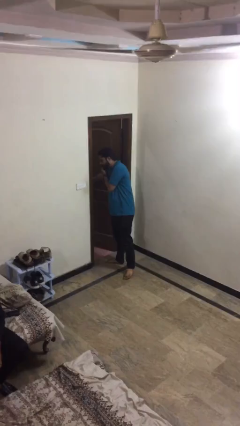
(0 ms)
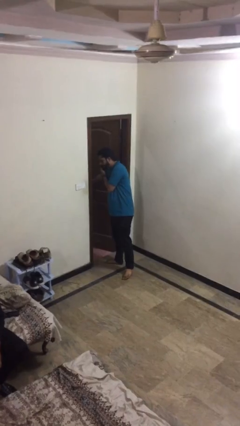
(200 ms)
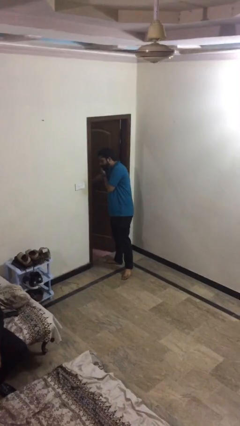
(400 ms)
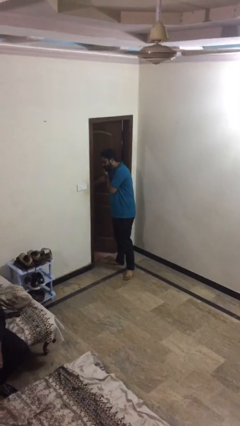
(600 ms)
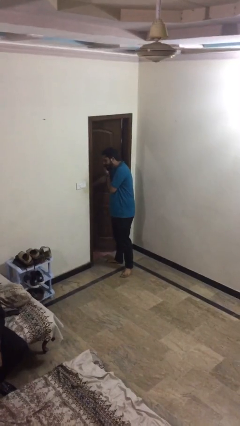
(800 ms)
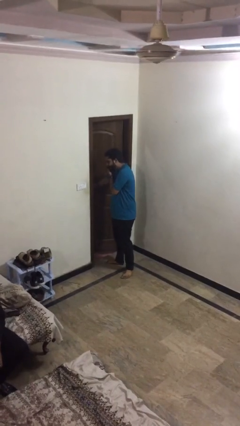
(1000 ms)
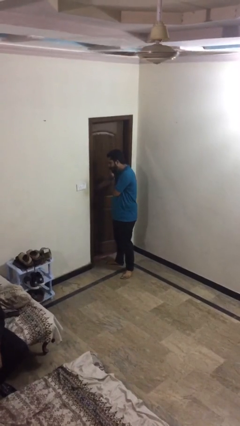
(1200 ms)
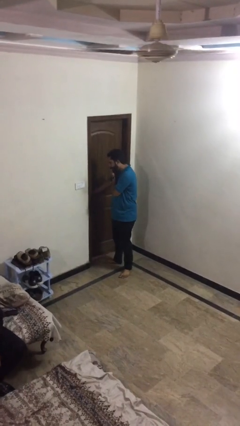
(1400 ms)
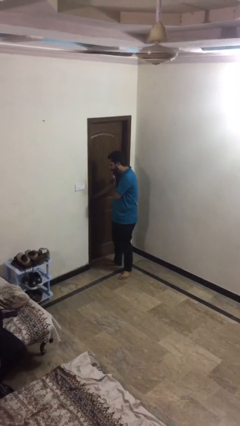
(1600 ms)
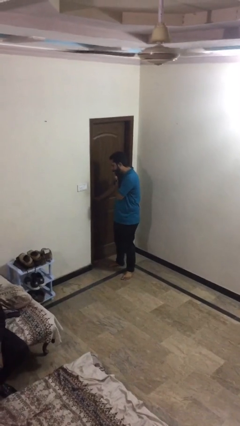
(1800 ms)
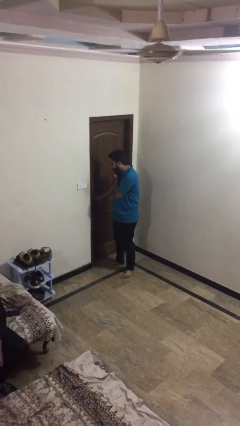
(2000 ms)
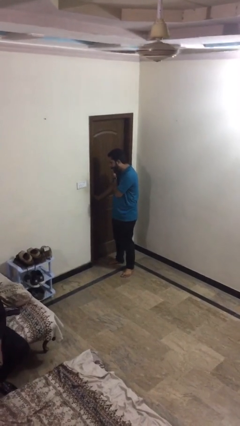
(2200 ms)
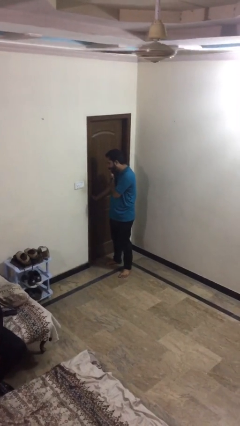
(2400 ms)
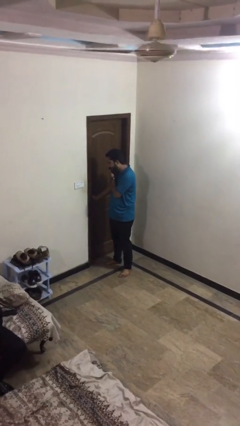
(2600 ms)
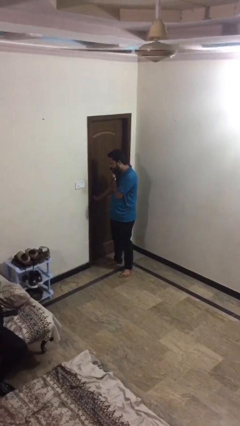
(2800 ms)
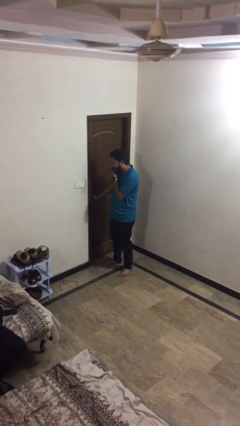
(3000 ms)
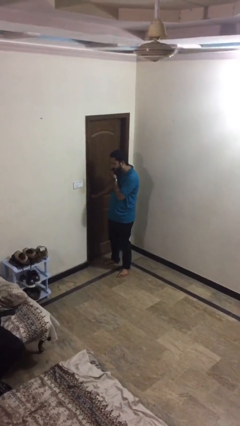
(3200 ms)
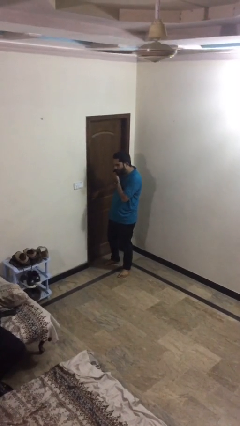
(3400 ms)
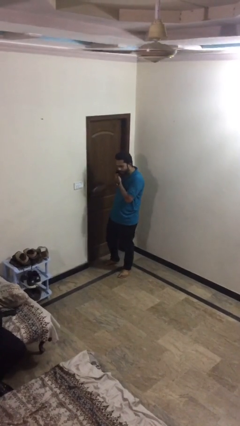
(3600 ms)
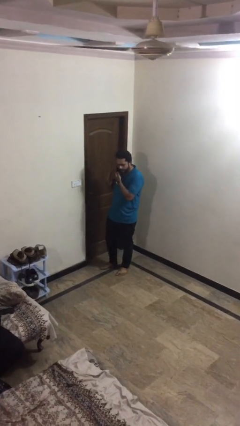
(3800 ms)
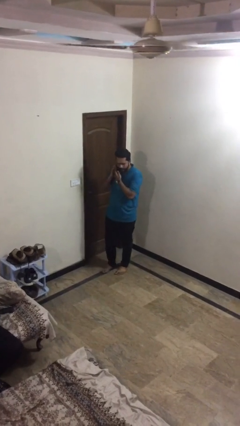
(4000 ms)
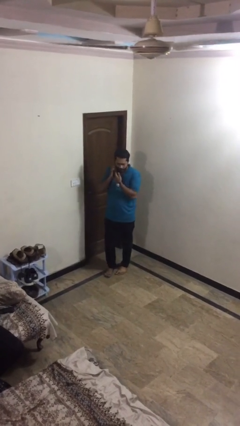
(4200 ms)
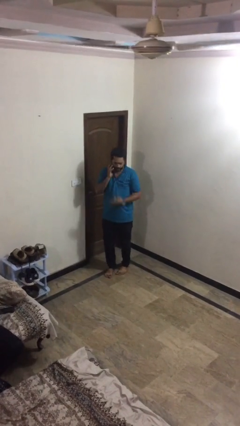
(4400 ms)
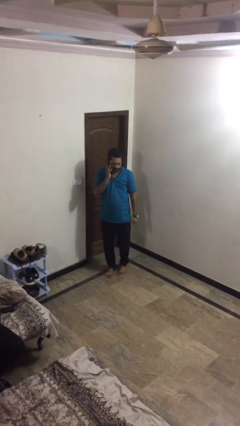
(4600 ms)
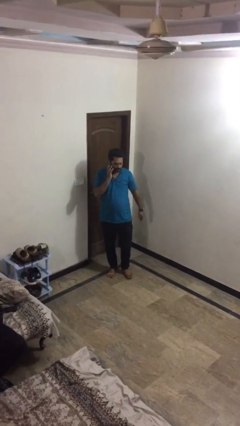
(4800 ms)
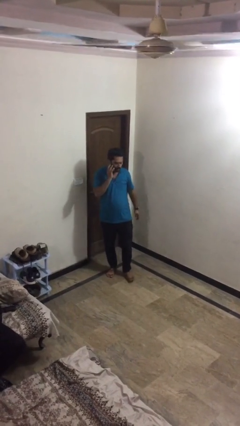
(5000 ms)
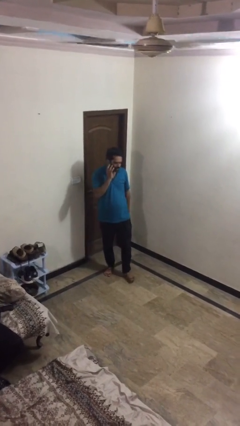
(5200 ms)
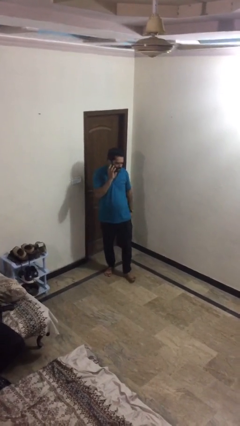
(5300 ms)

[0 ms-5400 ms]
person closes facility door

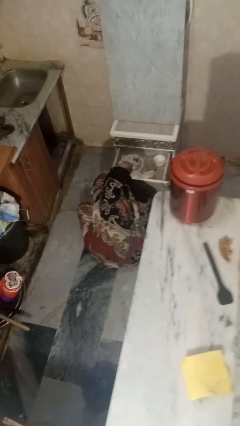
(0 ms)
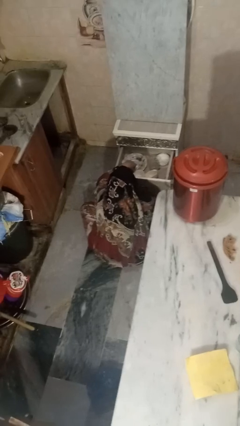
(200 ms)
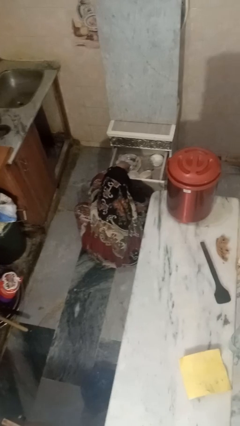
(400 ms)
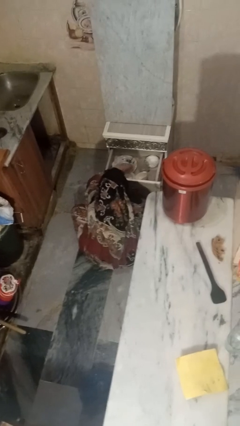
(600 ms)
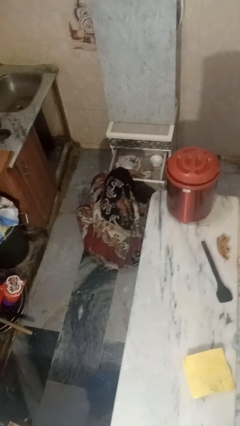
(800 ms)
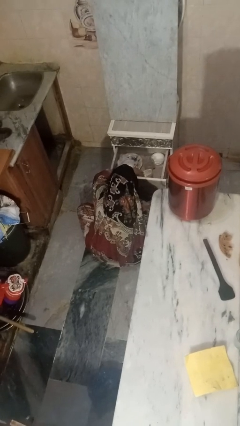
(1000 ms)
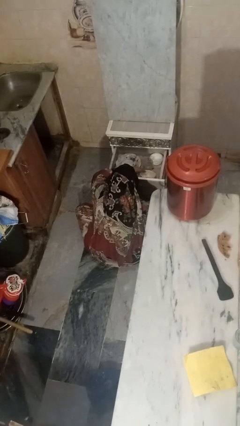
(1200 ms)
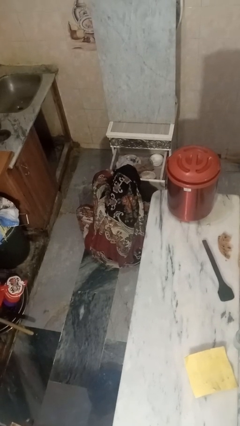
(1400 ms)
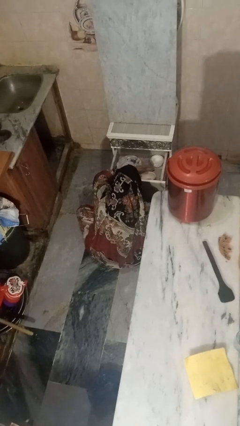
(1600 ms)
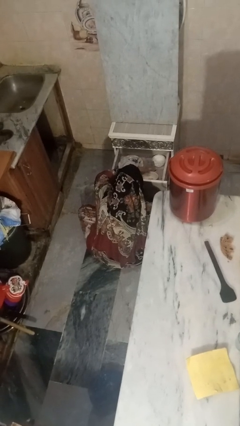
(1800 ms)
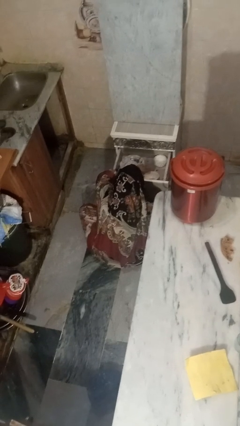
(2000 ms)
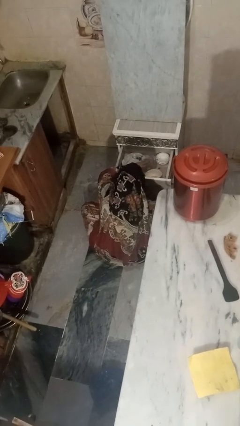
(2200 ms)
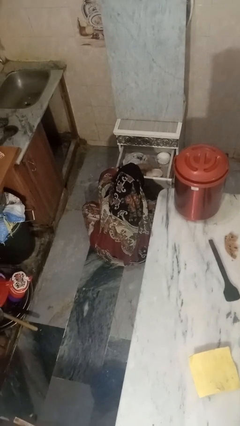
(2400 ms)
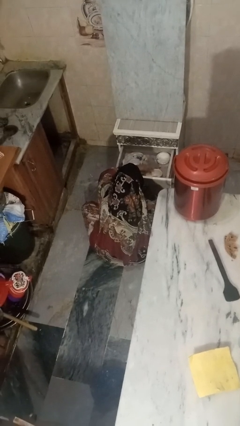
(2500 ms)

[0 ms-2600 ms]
person searches in kitchen drawer

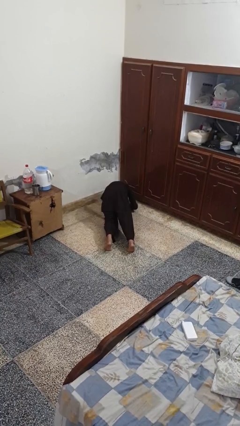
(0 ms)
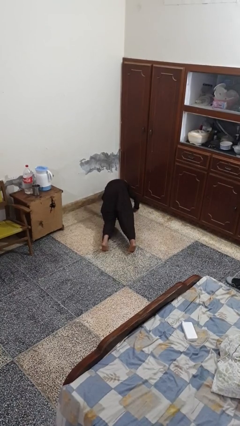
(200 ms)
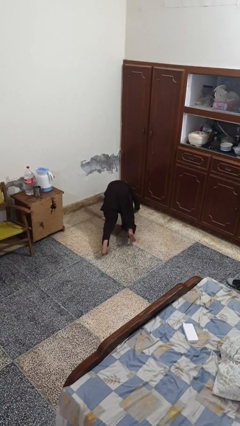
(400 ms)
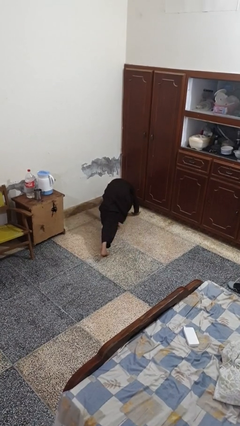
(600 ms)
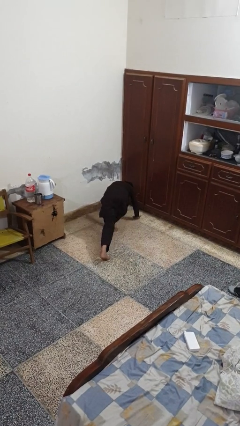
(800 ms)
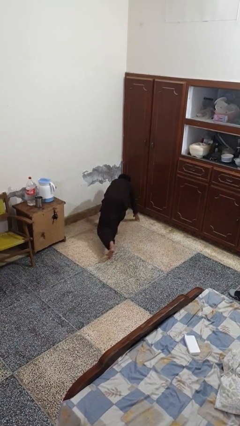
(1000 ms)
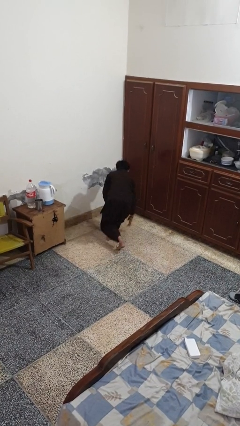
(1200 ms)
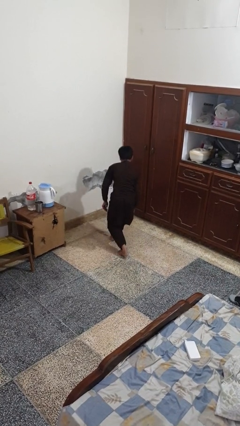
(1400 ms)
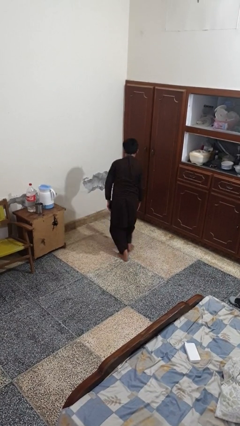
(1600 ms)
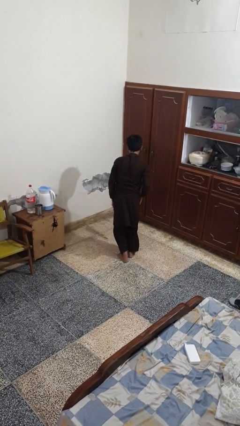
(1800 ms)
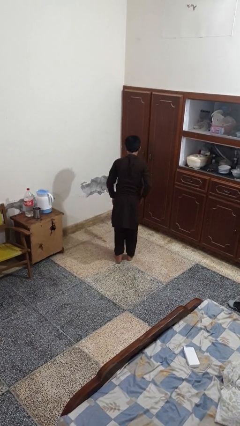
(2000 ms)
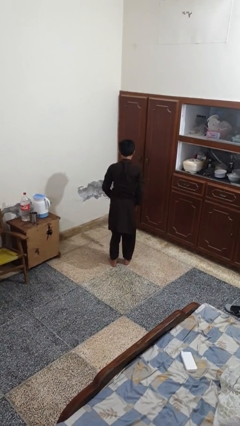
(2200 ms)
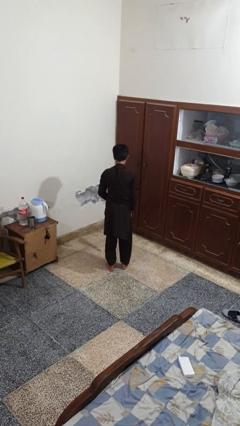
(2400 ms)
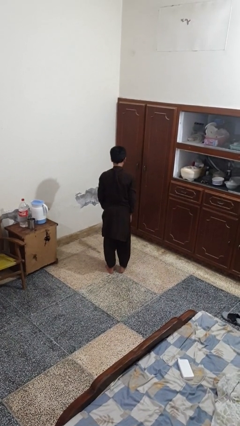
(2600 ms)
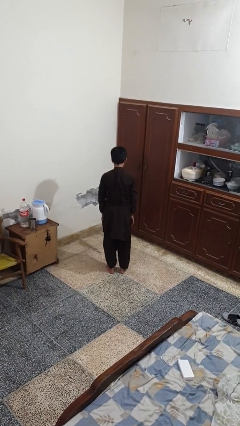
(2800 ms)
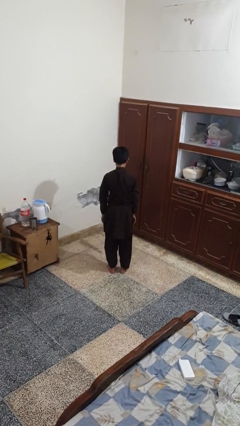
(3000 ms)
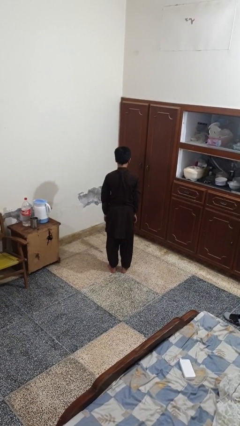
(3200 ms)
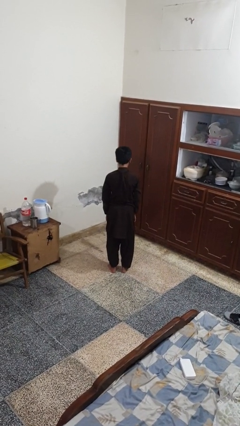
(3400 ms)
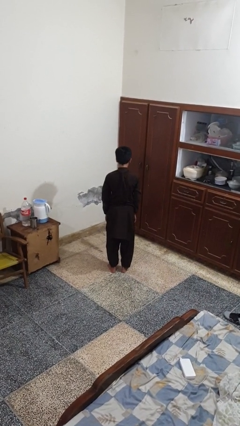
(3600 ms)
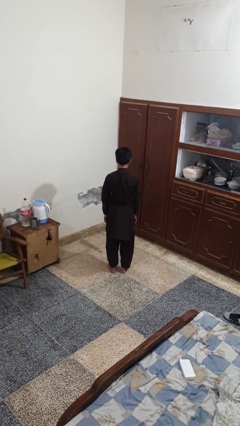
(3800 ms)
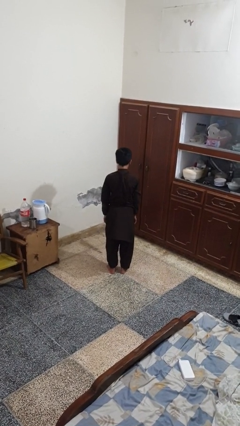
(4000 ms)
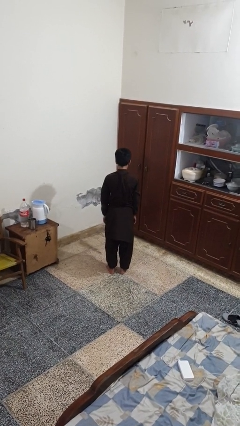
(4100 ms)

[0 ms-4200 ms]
person stands up from floor

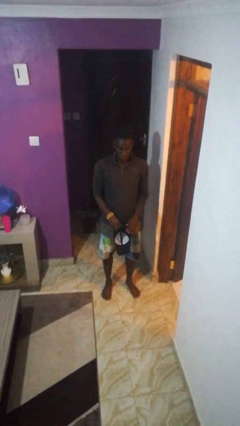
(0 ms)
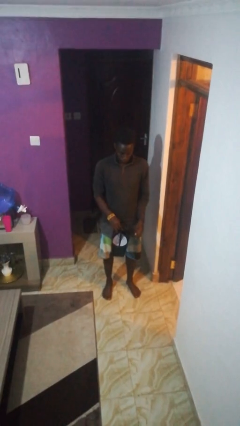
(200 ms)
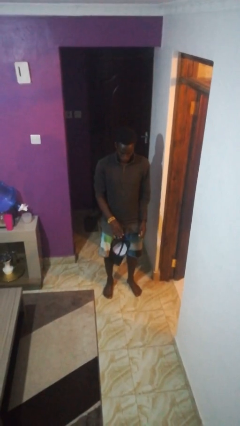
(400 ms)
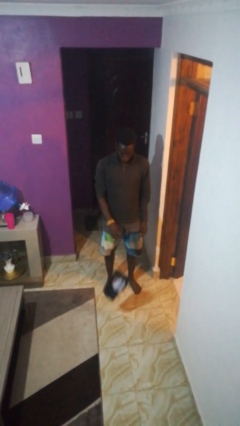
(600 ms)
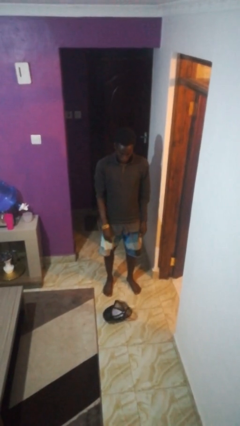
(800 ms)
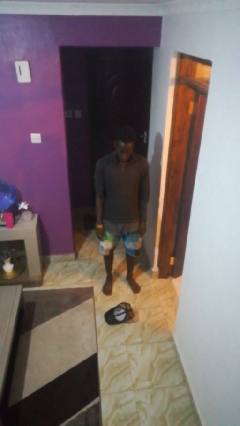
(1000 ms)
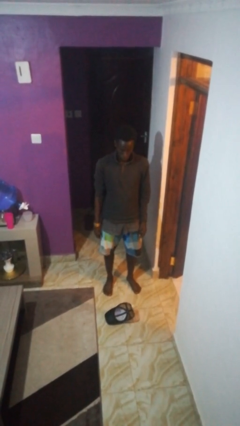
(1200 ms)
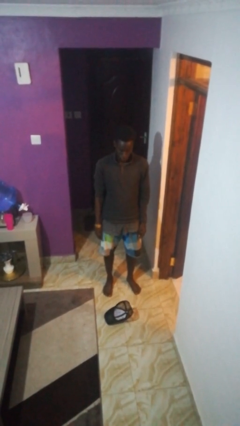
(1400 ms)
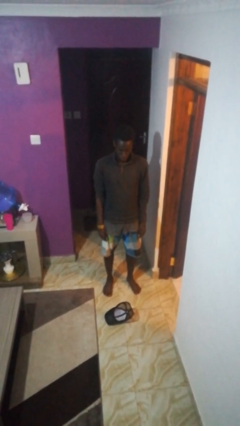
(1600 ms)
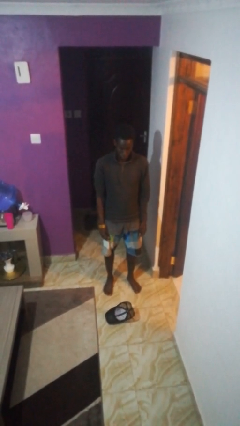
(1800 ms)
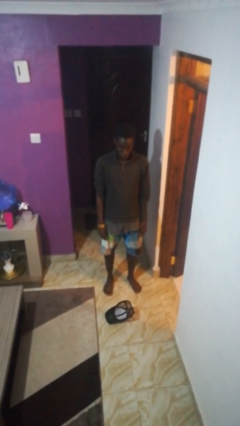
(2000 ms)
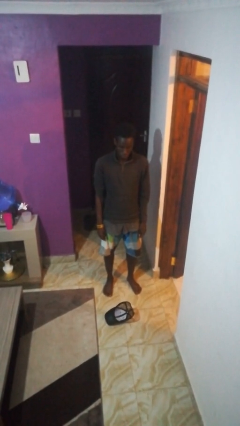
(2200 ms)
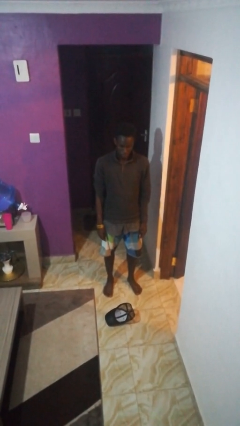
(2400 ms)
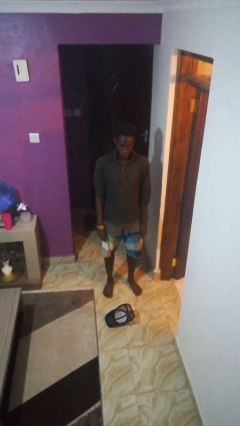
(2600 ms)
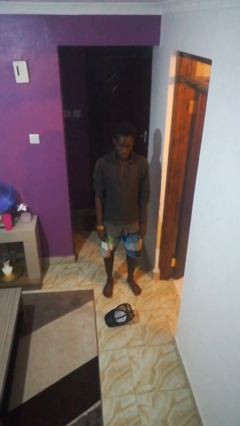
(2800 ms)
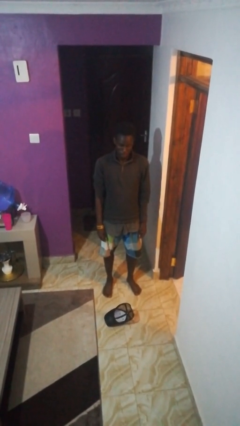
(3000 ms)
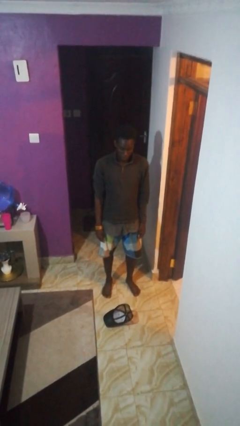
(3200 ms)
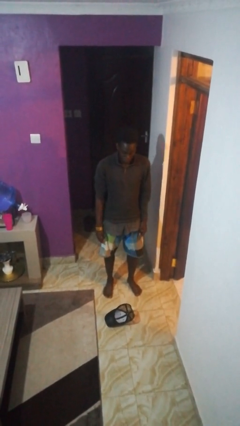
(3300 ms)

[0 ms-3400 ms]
person drops object

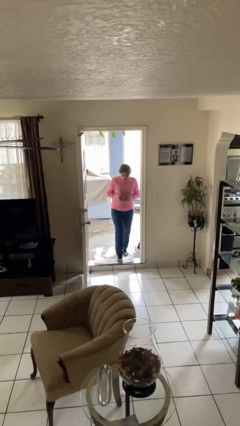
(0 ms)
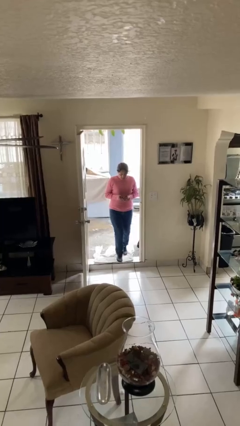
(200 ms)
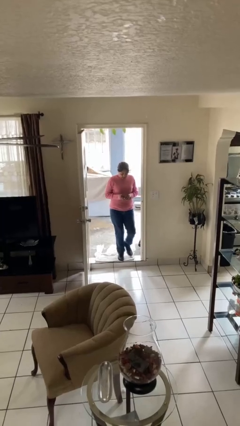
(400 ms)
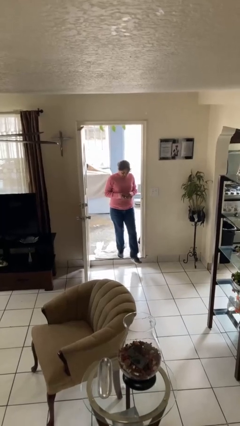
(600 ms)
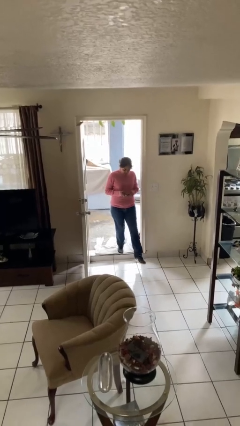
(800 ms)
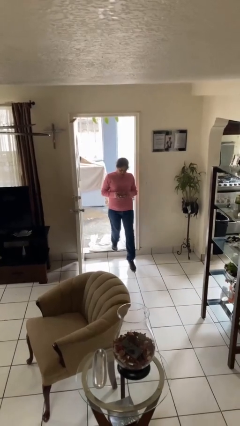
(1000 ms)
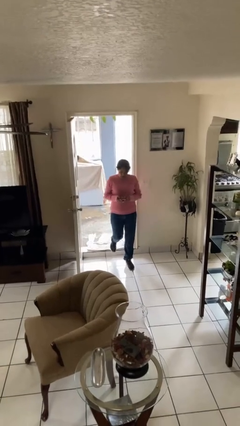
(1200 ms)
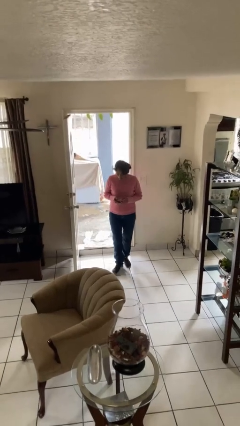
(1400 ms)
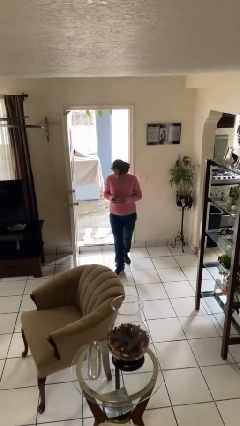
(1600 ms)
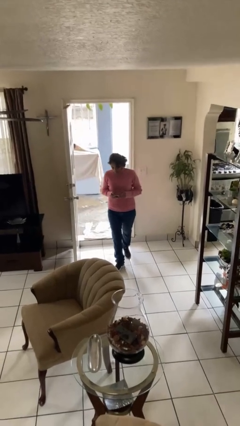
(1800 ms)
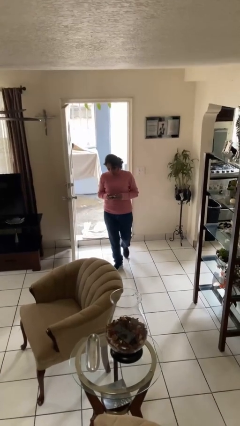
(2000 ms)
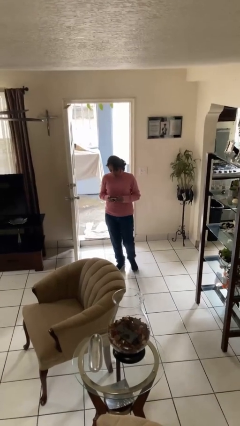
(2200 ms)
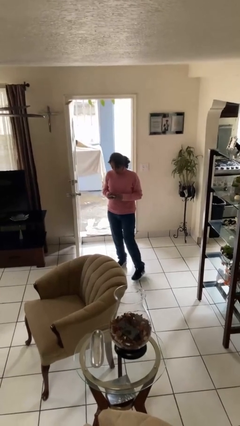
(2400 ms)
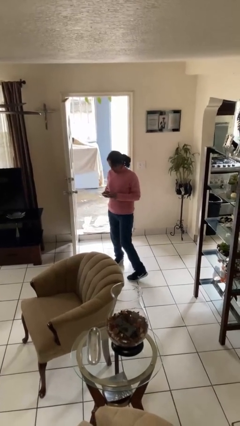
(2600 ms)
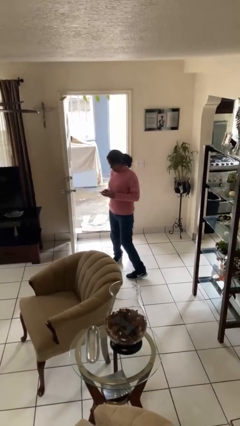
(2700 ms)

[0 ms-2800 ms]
person enters scene through structure
